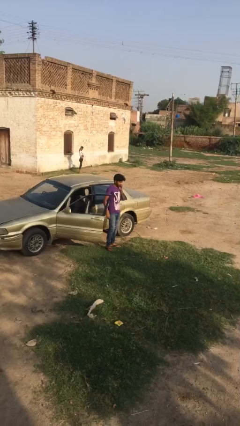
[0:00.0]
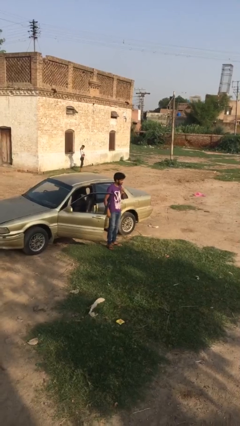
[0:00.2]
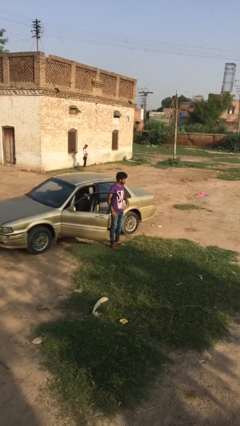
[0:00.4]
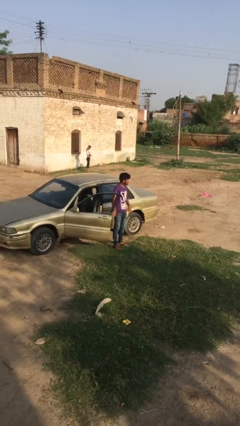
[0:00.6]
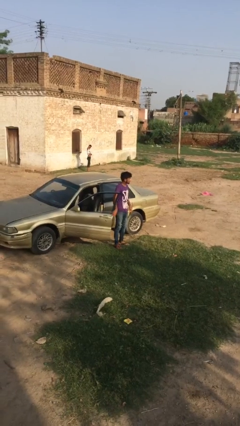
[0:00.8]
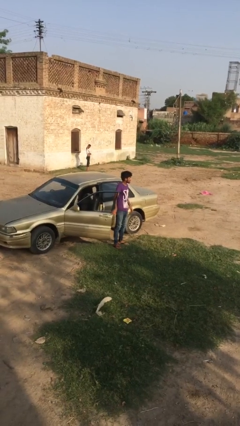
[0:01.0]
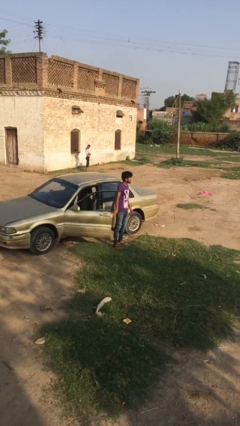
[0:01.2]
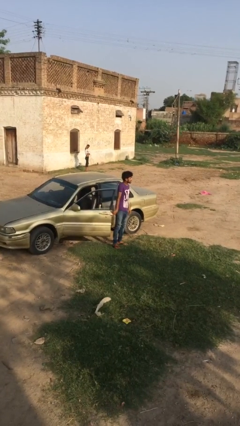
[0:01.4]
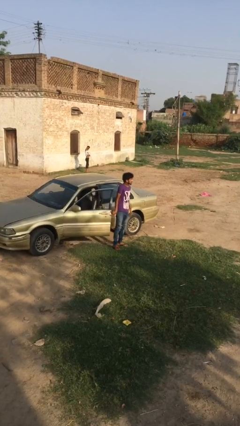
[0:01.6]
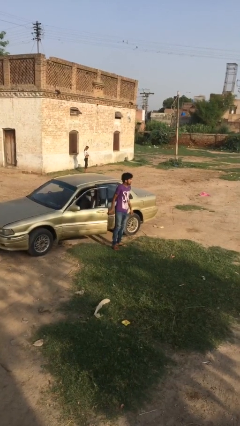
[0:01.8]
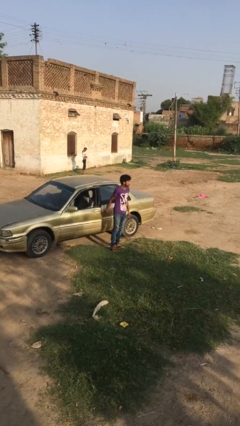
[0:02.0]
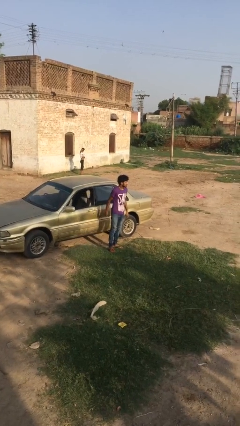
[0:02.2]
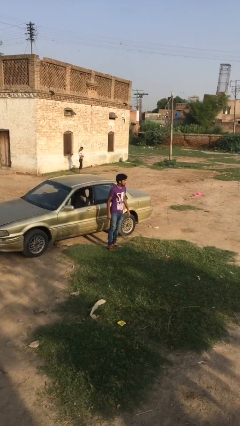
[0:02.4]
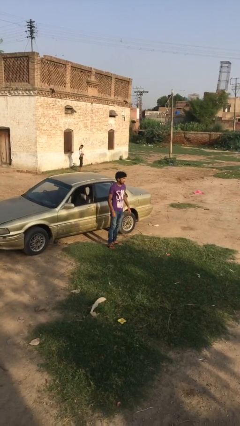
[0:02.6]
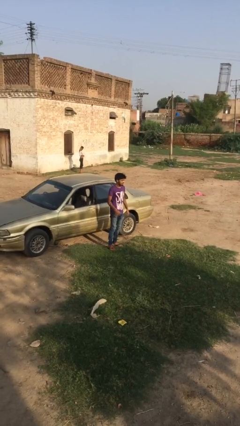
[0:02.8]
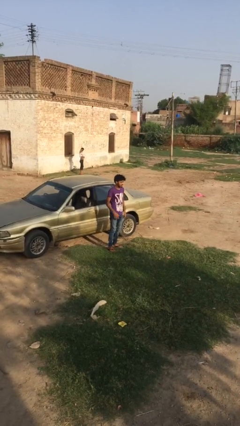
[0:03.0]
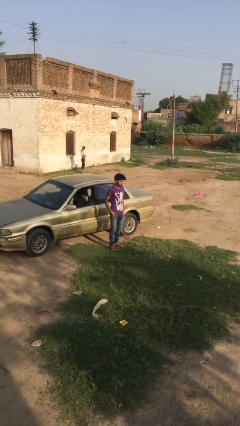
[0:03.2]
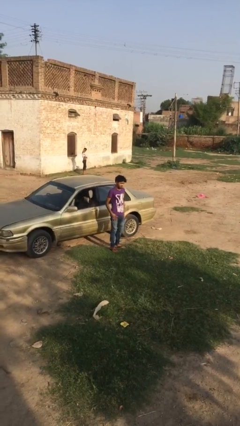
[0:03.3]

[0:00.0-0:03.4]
person closes car door

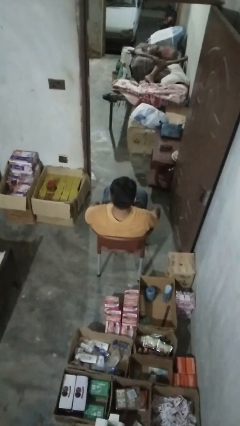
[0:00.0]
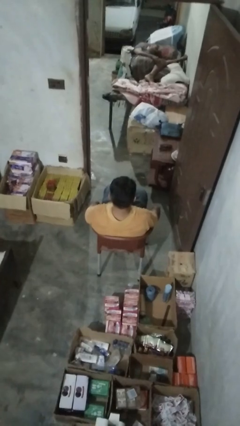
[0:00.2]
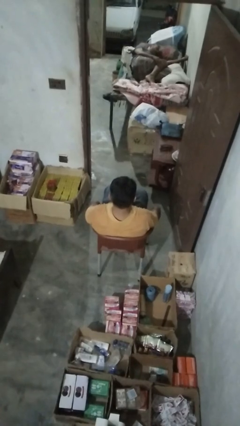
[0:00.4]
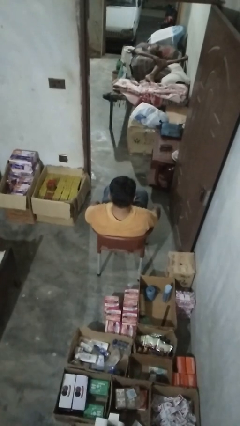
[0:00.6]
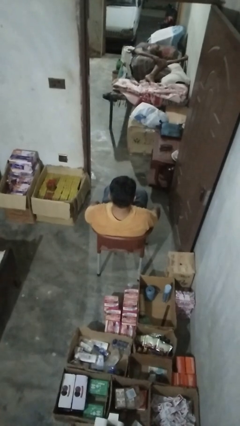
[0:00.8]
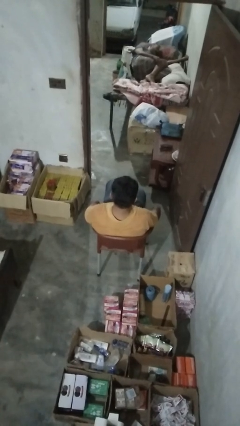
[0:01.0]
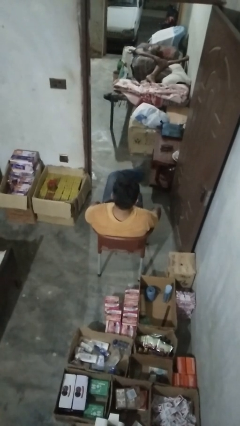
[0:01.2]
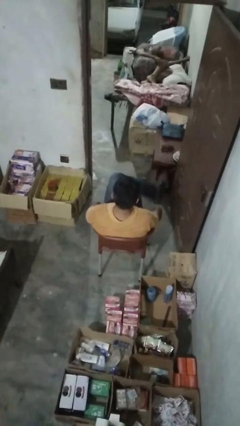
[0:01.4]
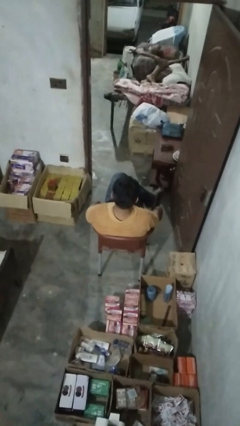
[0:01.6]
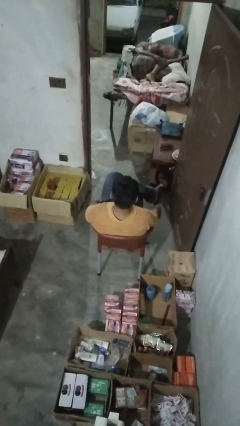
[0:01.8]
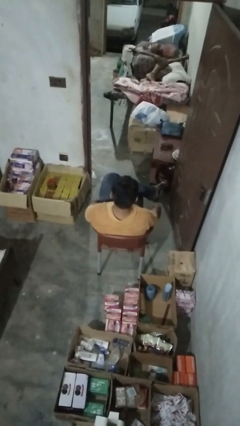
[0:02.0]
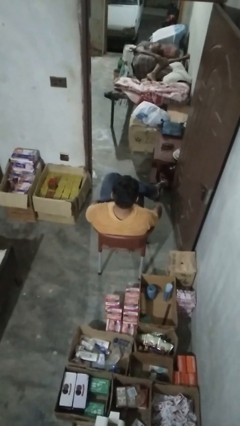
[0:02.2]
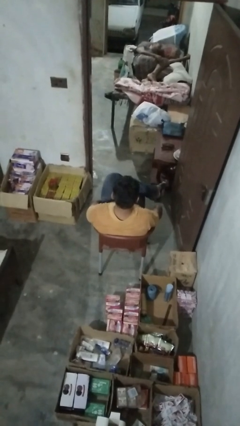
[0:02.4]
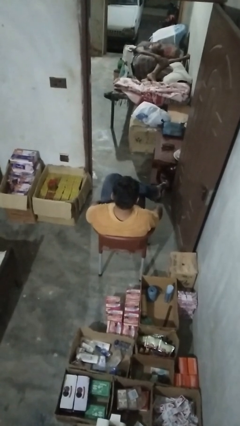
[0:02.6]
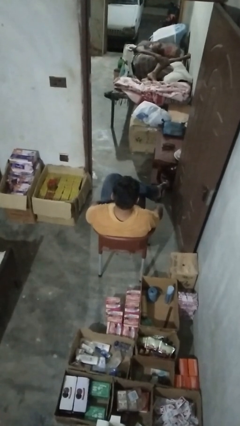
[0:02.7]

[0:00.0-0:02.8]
person crosses legs

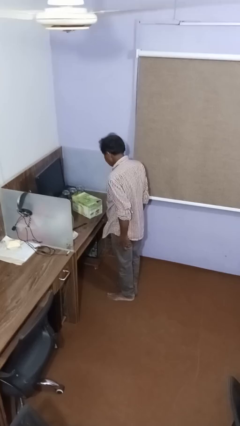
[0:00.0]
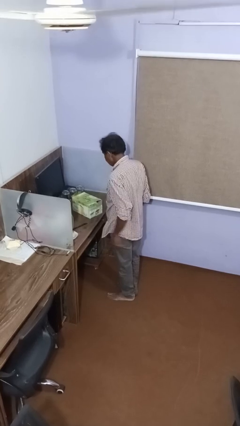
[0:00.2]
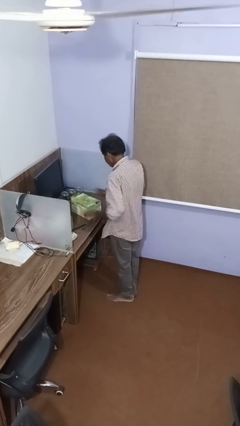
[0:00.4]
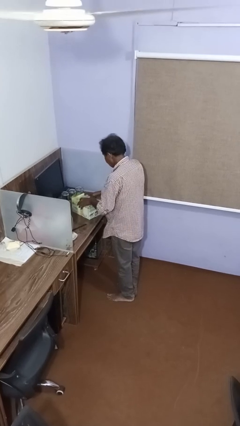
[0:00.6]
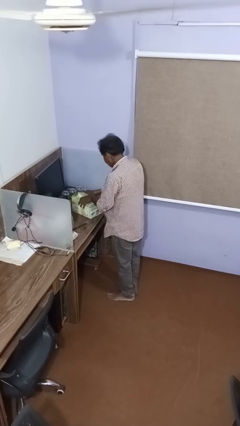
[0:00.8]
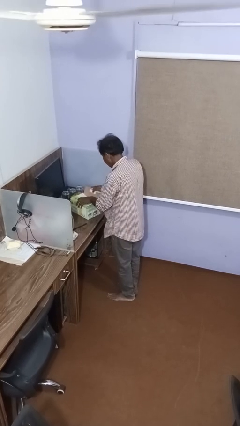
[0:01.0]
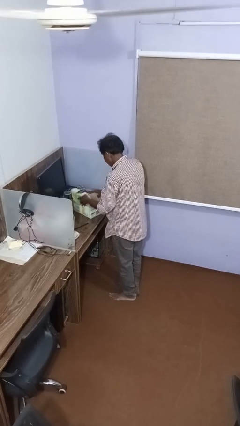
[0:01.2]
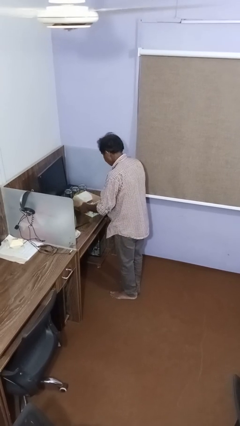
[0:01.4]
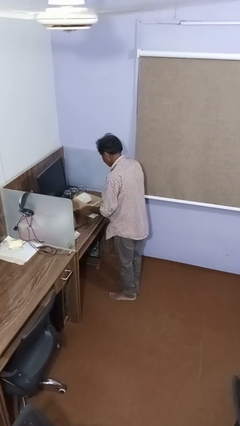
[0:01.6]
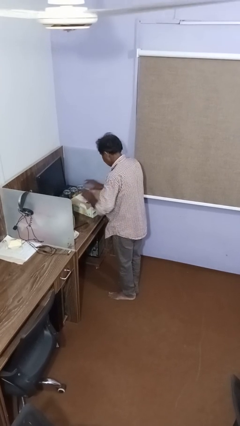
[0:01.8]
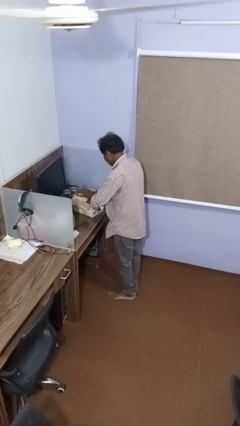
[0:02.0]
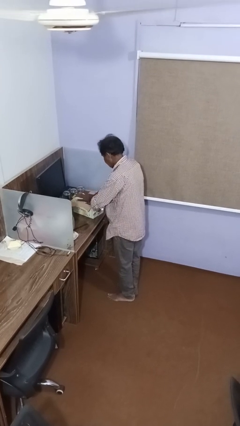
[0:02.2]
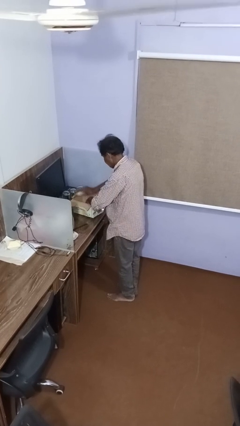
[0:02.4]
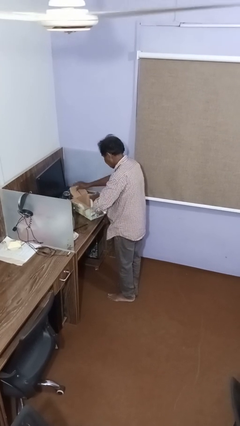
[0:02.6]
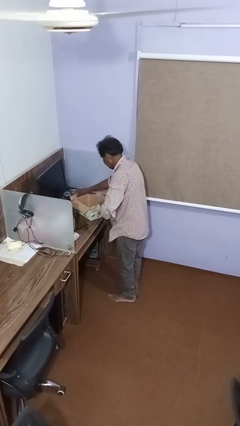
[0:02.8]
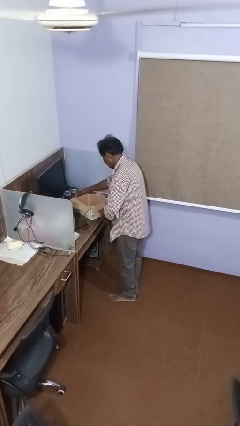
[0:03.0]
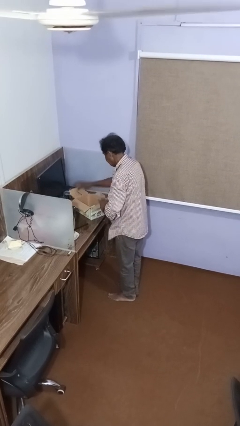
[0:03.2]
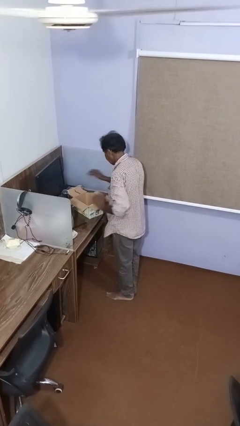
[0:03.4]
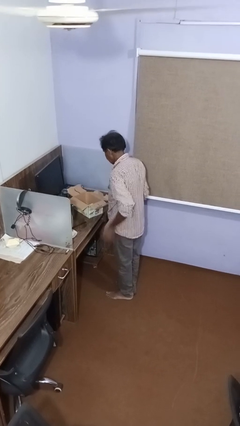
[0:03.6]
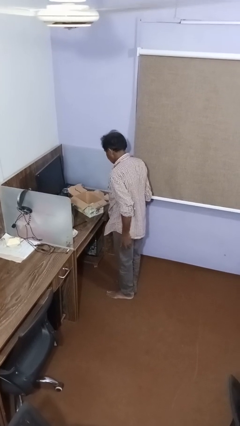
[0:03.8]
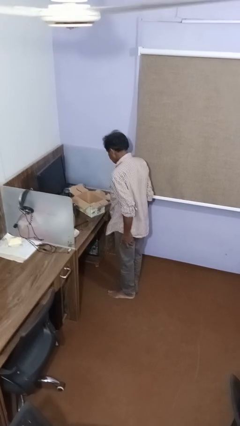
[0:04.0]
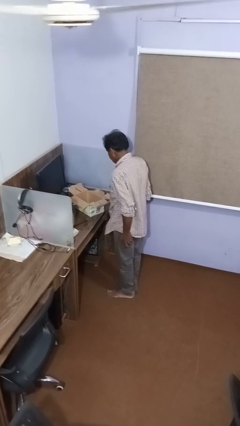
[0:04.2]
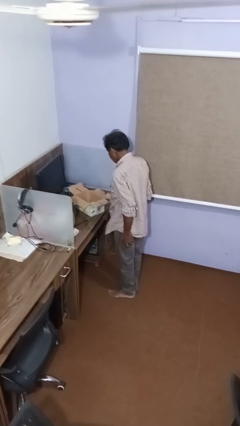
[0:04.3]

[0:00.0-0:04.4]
person opens box

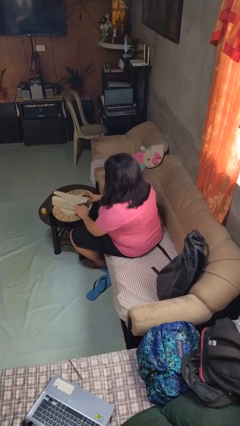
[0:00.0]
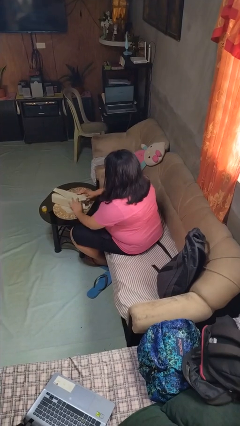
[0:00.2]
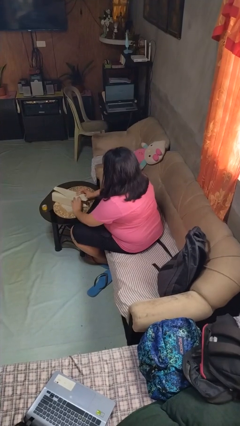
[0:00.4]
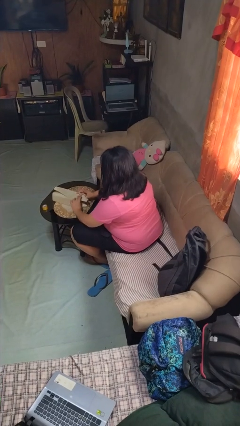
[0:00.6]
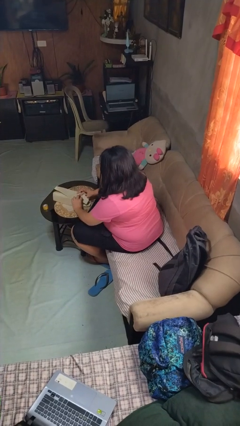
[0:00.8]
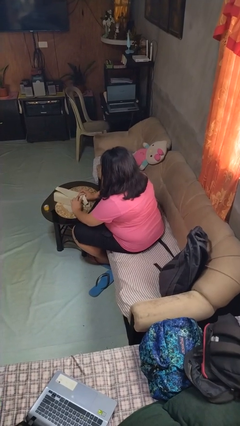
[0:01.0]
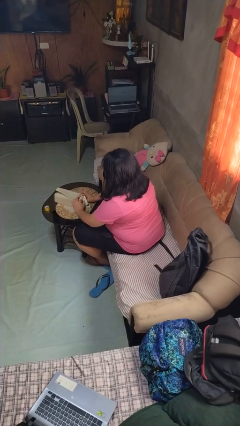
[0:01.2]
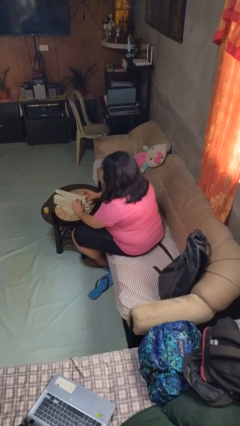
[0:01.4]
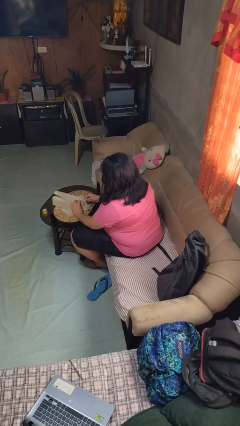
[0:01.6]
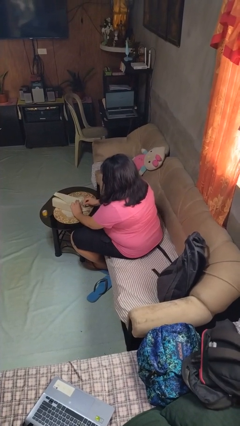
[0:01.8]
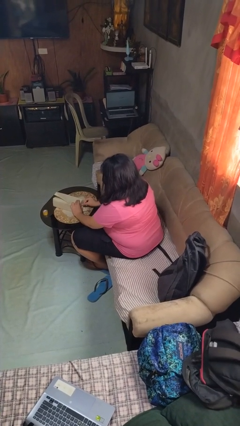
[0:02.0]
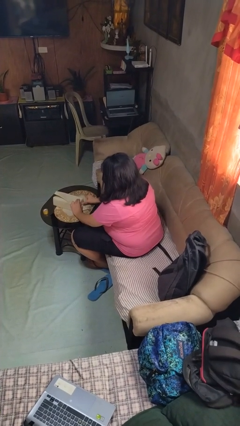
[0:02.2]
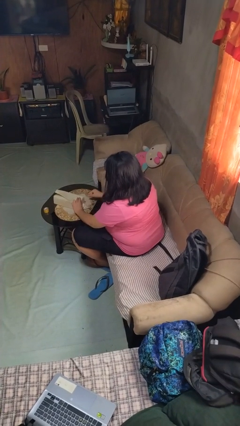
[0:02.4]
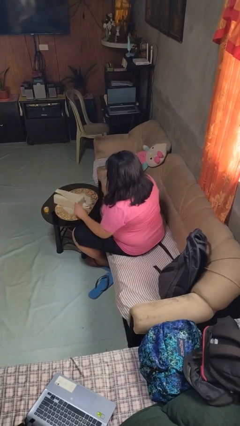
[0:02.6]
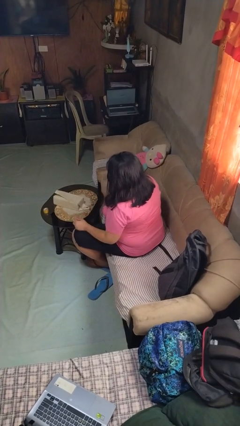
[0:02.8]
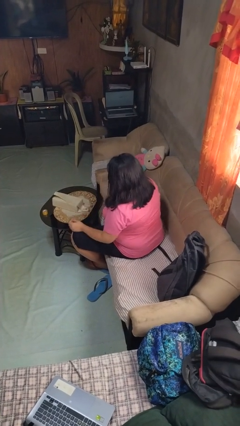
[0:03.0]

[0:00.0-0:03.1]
person wraps box

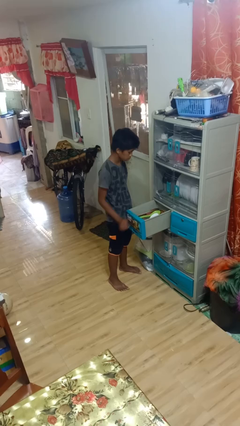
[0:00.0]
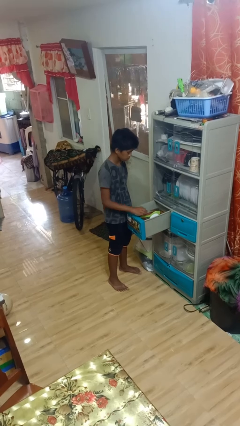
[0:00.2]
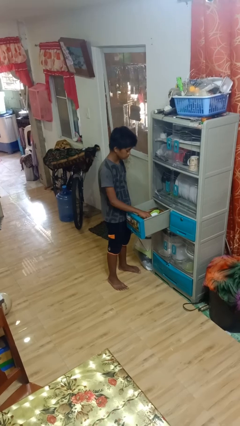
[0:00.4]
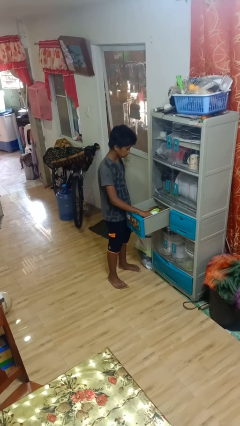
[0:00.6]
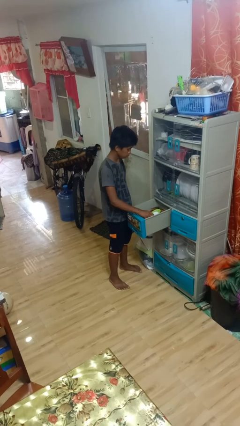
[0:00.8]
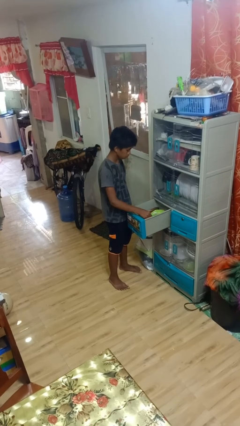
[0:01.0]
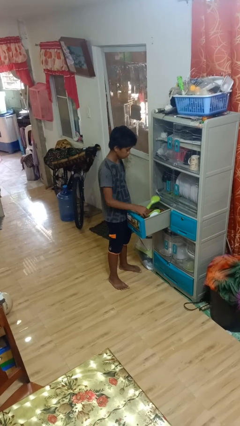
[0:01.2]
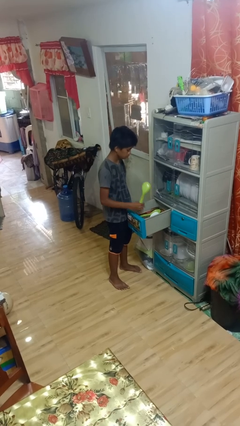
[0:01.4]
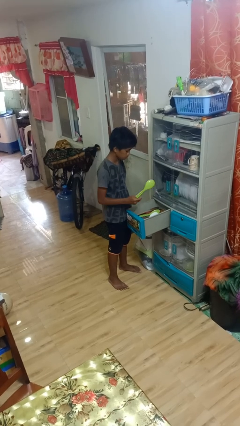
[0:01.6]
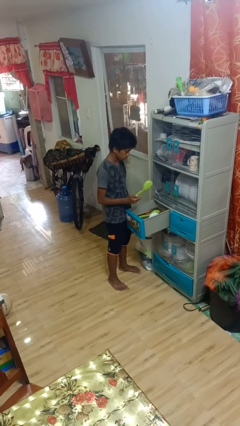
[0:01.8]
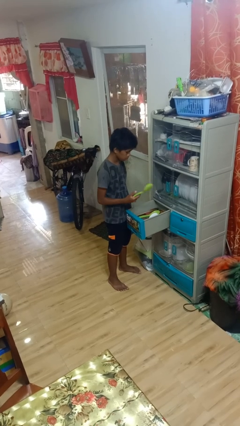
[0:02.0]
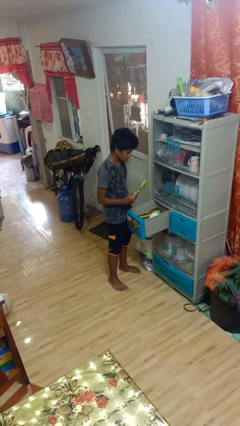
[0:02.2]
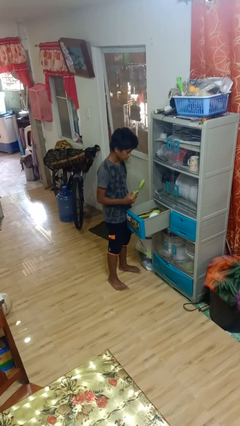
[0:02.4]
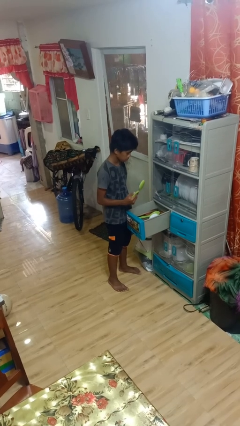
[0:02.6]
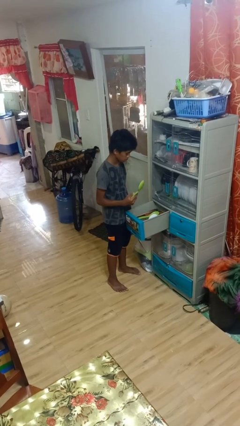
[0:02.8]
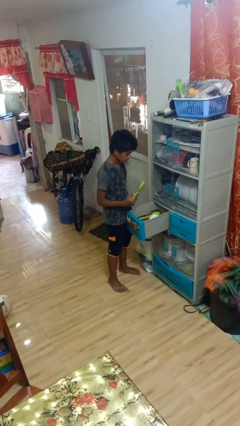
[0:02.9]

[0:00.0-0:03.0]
person takes object from kitchen drawer

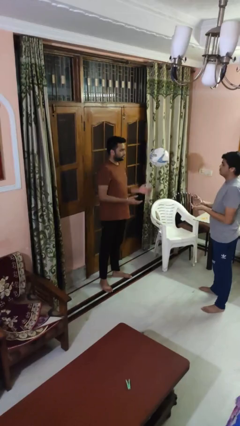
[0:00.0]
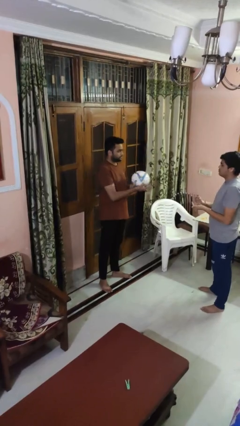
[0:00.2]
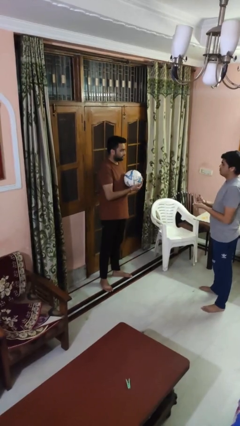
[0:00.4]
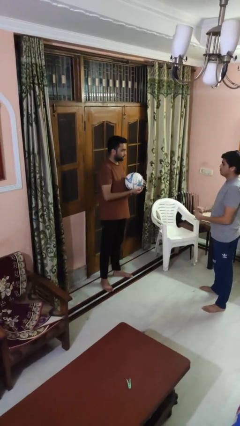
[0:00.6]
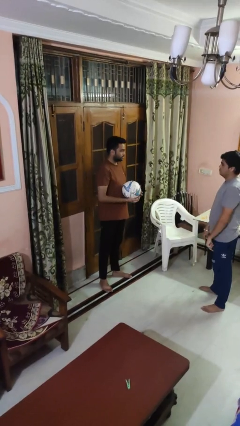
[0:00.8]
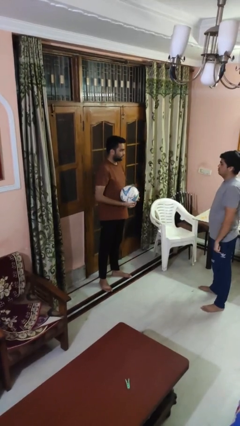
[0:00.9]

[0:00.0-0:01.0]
person catches object from person

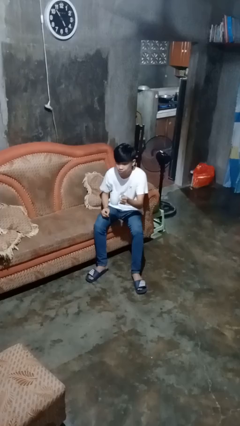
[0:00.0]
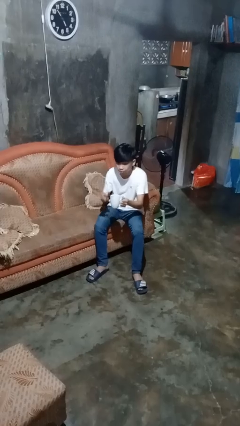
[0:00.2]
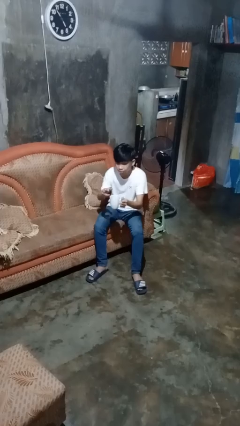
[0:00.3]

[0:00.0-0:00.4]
person stirs mug
